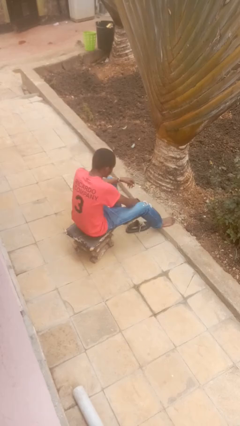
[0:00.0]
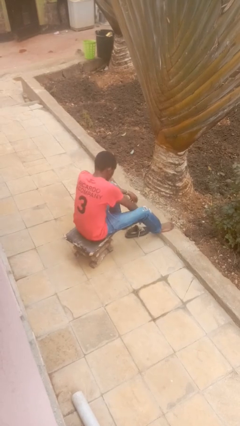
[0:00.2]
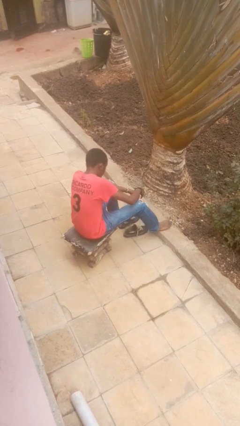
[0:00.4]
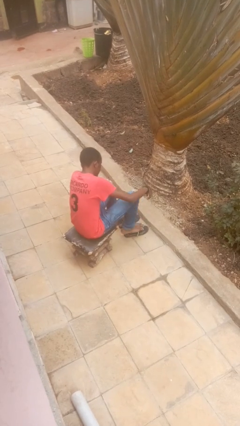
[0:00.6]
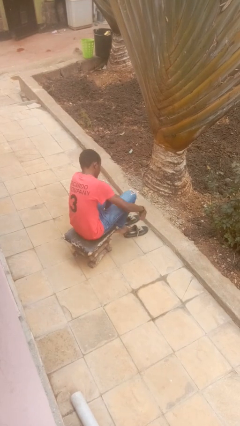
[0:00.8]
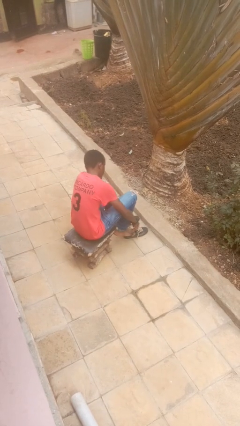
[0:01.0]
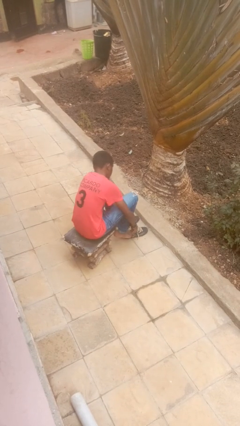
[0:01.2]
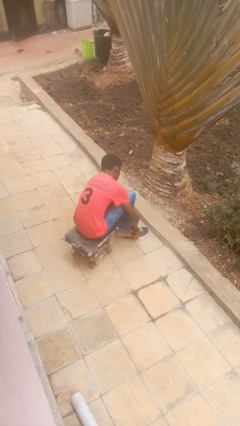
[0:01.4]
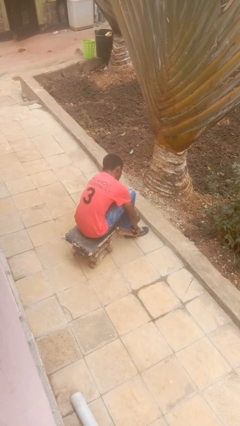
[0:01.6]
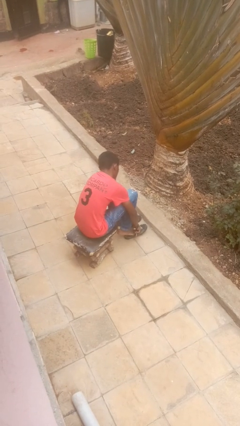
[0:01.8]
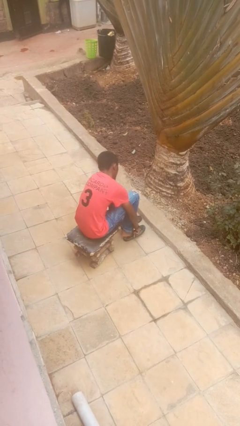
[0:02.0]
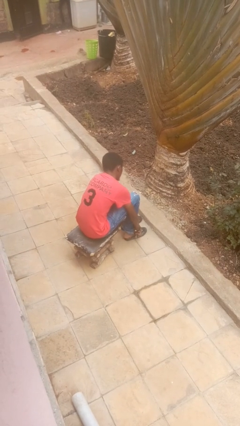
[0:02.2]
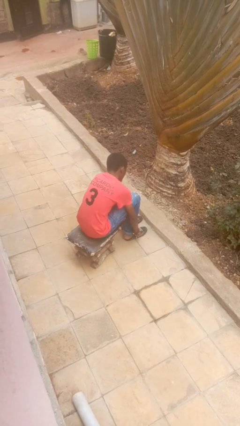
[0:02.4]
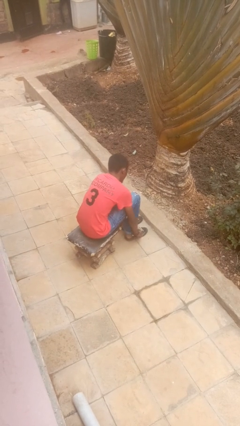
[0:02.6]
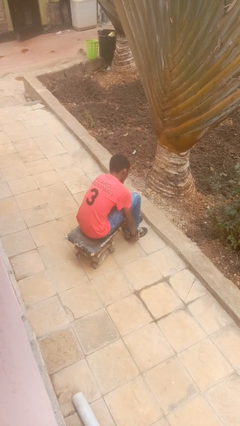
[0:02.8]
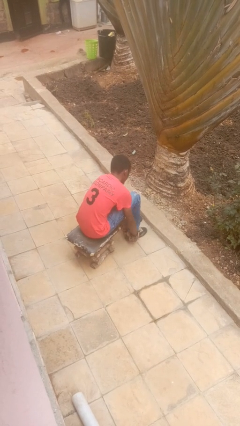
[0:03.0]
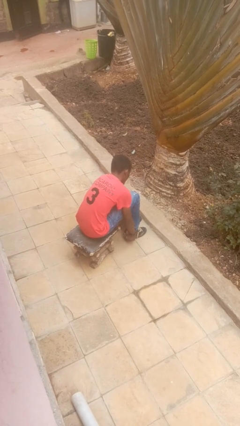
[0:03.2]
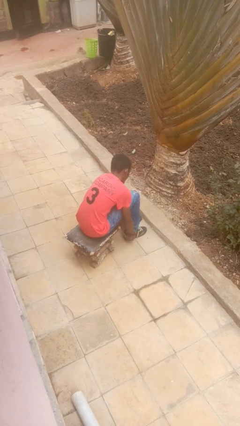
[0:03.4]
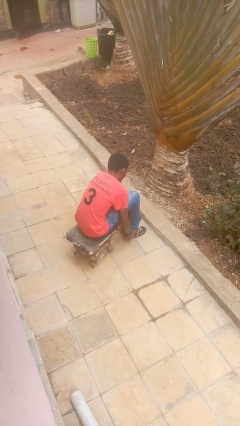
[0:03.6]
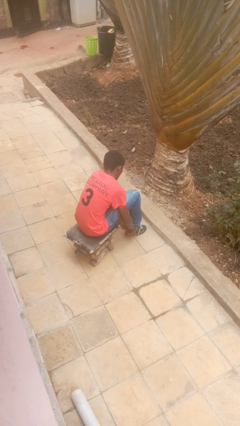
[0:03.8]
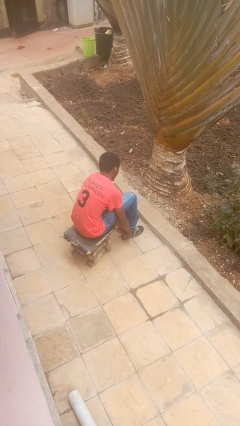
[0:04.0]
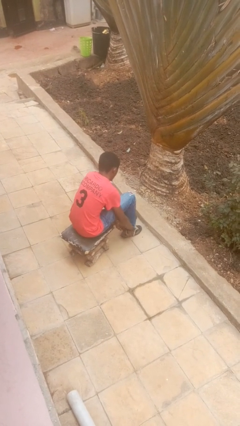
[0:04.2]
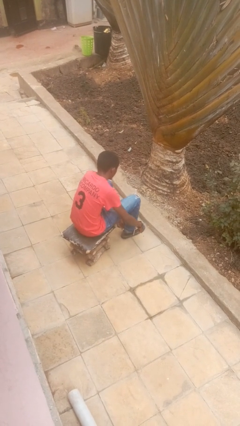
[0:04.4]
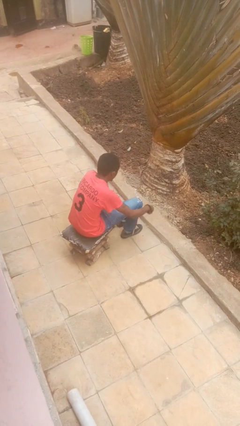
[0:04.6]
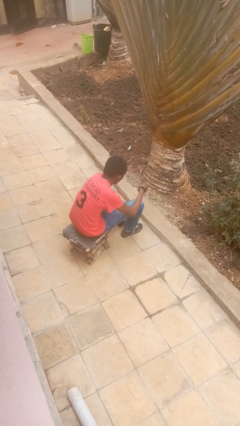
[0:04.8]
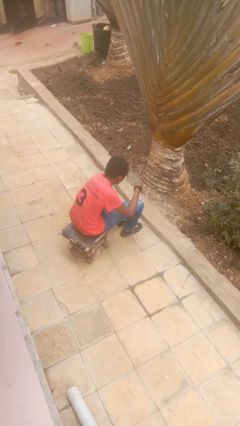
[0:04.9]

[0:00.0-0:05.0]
person puts on shoes

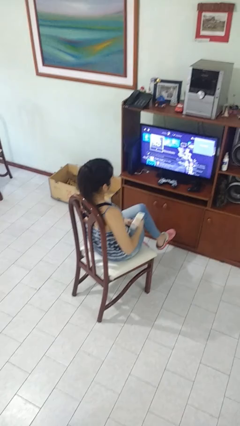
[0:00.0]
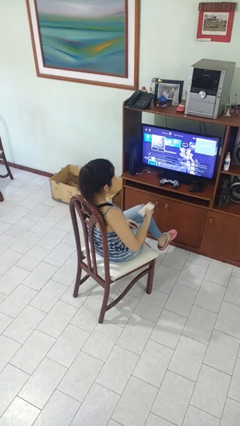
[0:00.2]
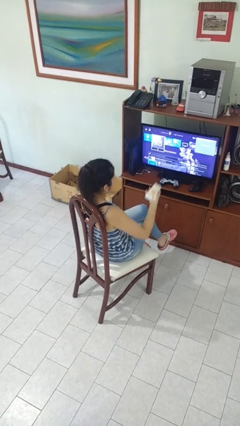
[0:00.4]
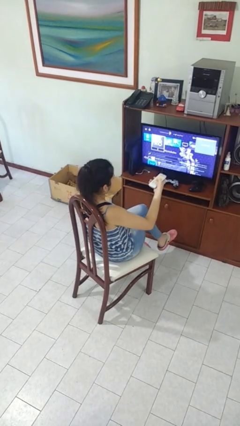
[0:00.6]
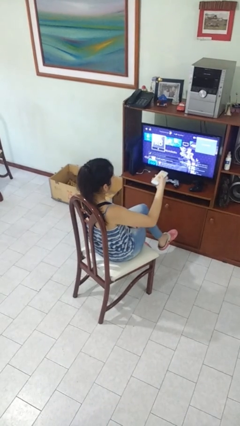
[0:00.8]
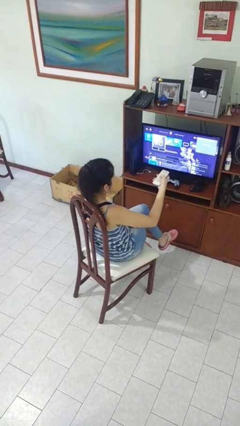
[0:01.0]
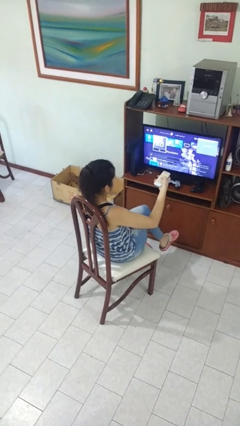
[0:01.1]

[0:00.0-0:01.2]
person uses television remote

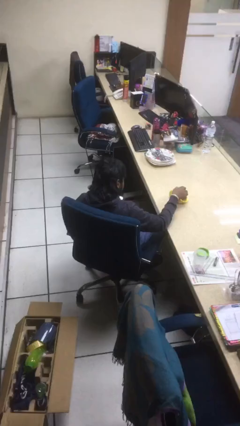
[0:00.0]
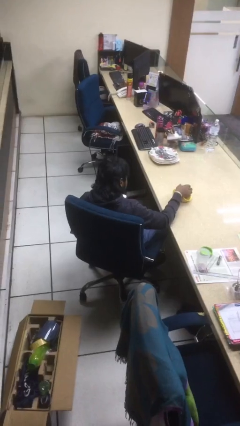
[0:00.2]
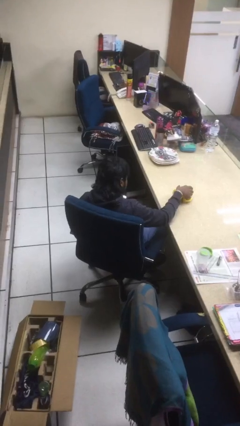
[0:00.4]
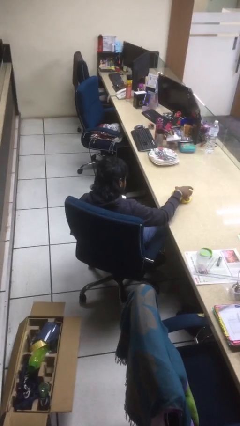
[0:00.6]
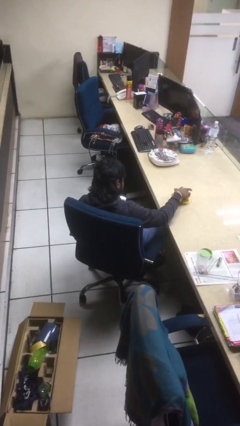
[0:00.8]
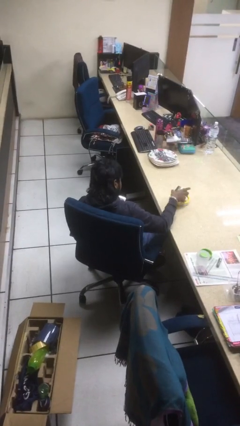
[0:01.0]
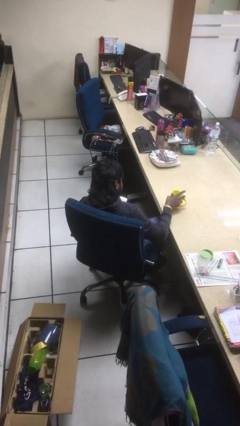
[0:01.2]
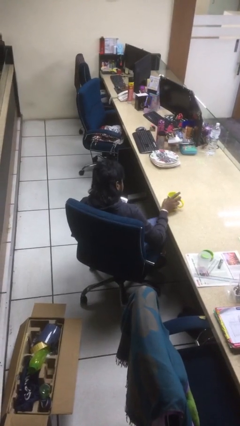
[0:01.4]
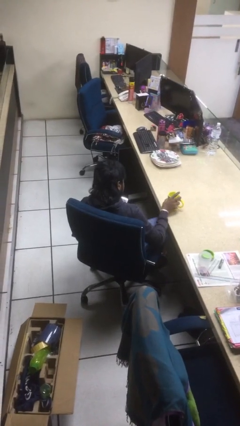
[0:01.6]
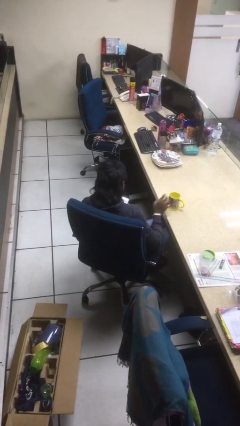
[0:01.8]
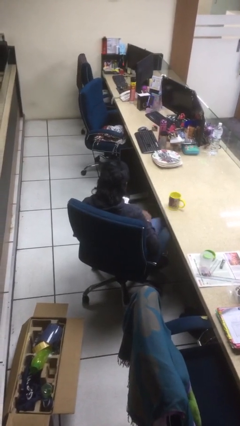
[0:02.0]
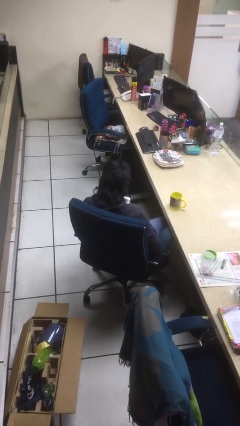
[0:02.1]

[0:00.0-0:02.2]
person sets upright glass

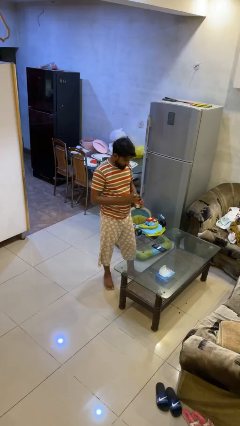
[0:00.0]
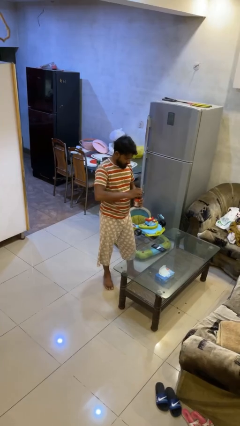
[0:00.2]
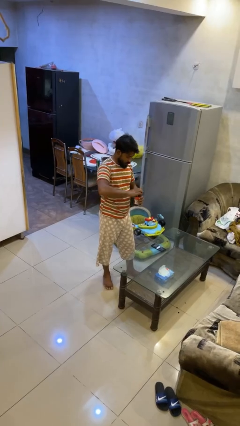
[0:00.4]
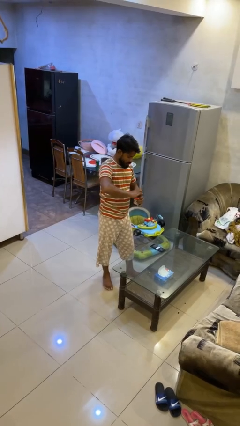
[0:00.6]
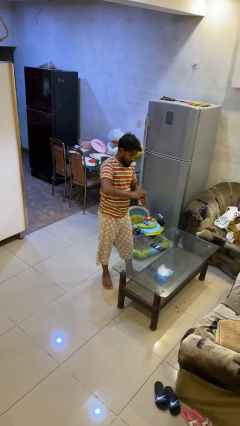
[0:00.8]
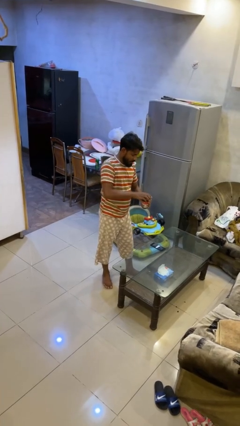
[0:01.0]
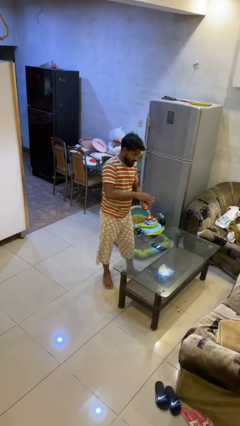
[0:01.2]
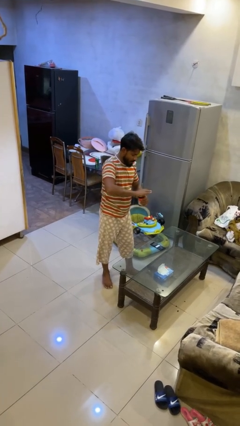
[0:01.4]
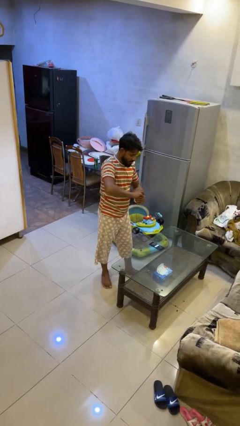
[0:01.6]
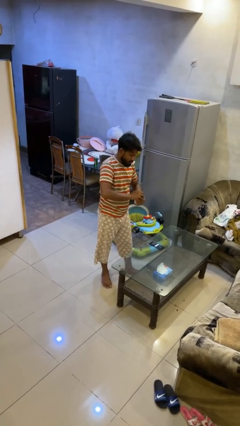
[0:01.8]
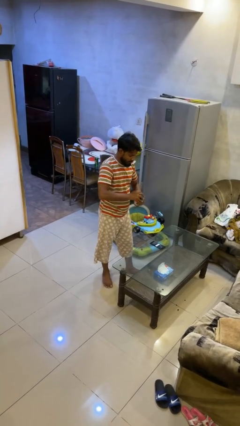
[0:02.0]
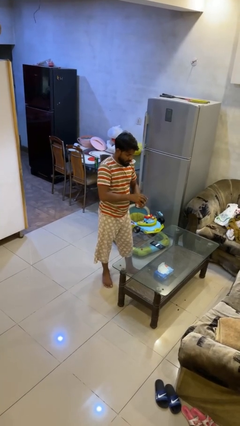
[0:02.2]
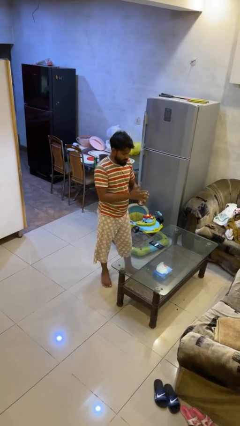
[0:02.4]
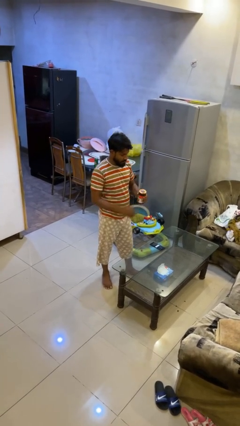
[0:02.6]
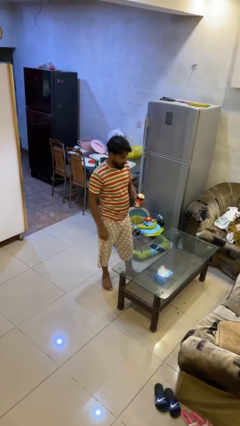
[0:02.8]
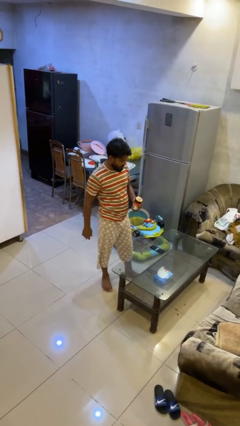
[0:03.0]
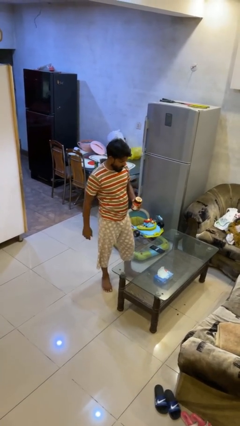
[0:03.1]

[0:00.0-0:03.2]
person closes jar

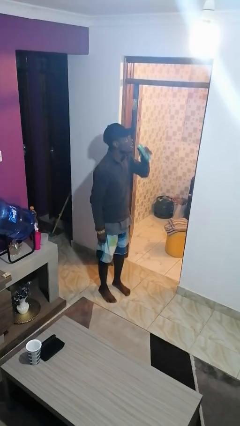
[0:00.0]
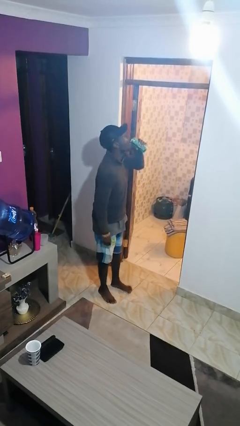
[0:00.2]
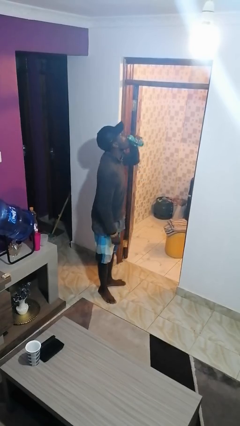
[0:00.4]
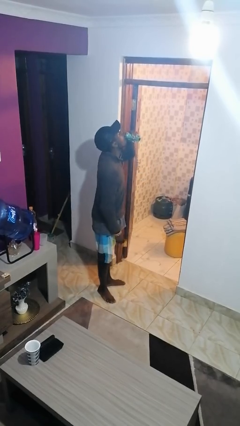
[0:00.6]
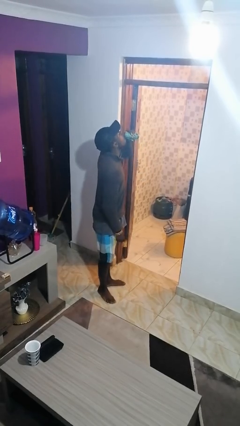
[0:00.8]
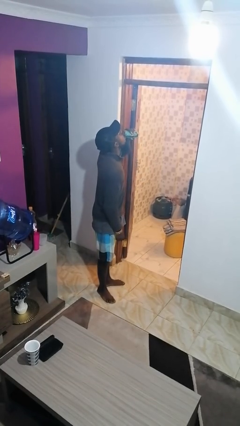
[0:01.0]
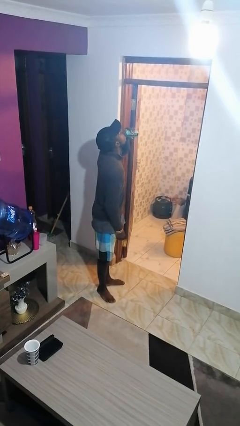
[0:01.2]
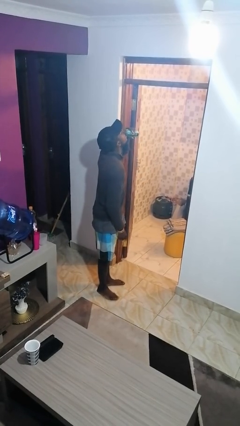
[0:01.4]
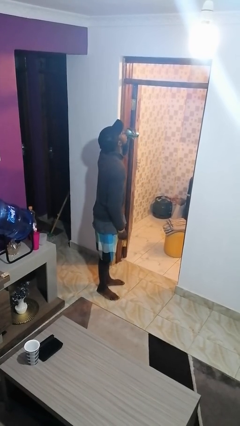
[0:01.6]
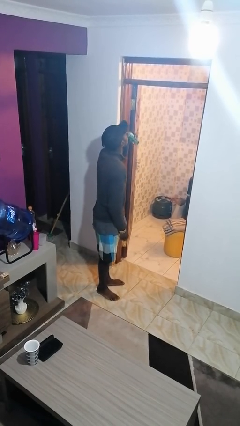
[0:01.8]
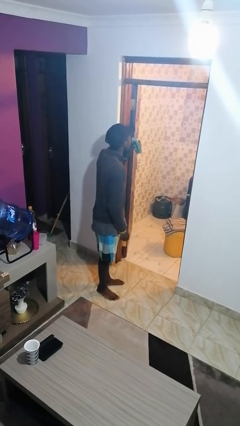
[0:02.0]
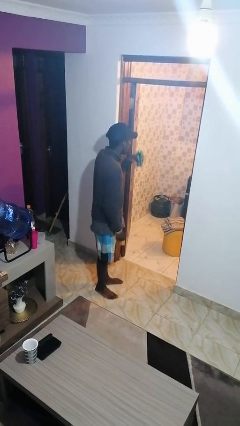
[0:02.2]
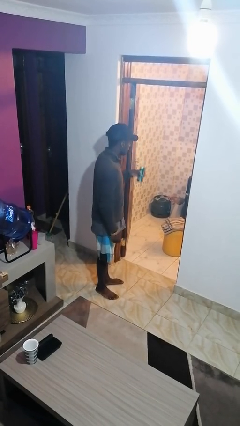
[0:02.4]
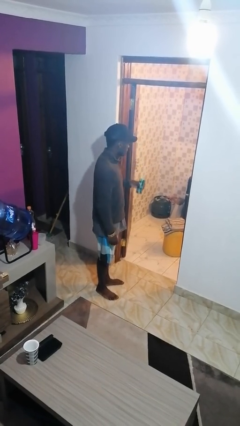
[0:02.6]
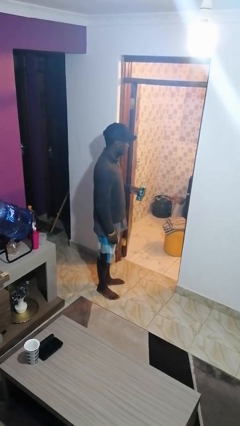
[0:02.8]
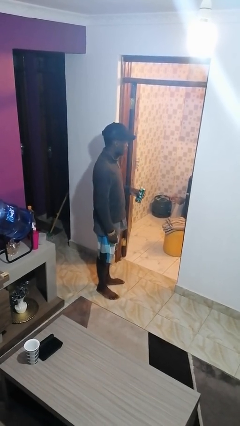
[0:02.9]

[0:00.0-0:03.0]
person drinks from beverage can

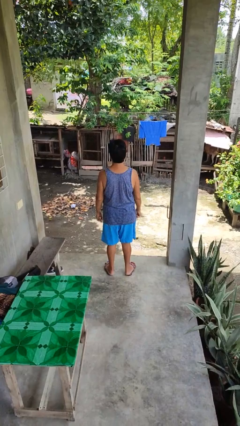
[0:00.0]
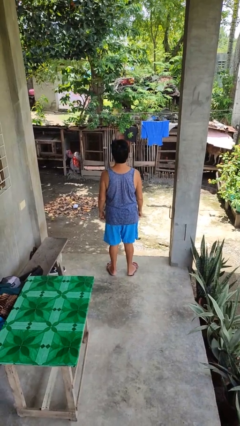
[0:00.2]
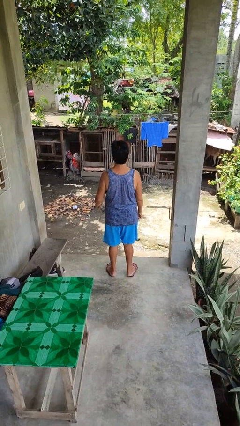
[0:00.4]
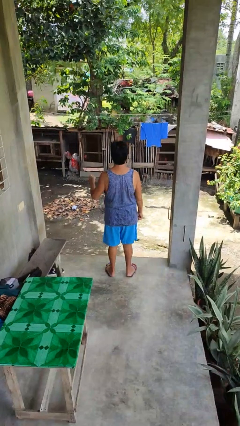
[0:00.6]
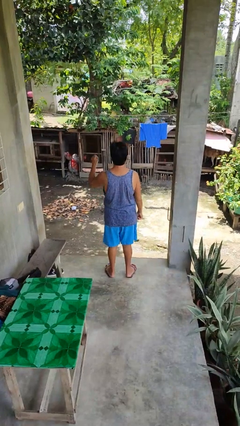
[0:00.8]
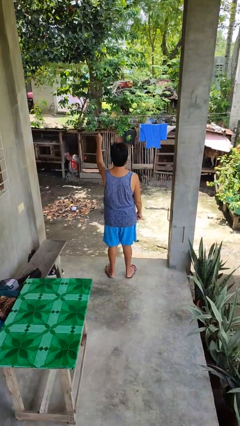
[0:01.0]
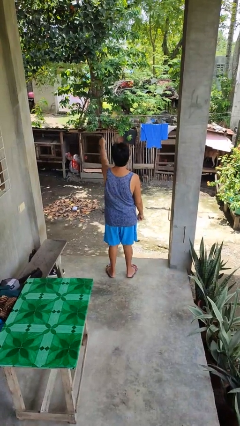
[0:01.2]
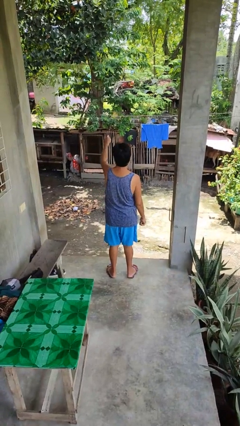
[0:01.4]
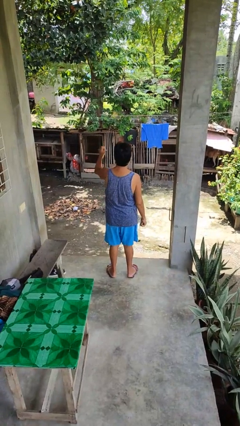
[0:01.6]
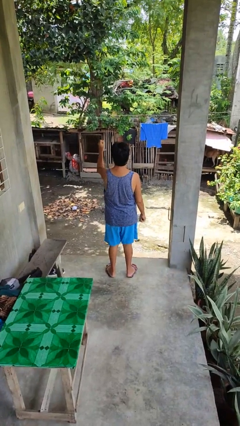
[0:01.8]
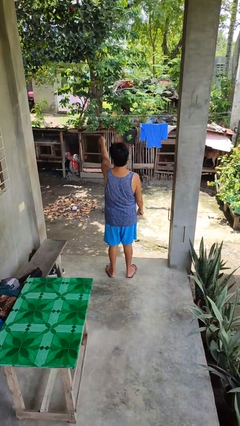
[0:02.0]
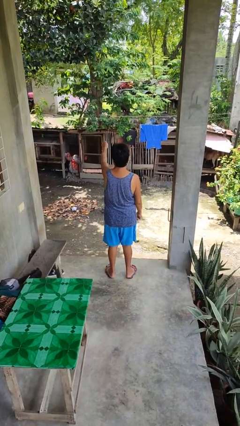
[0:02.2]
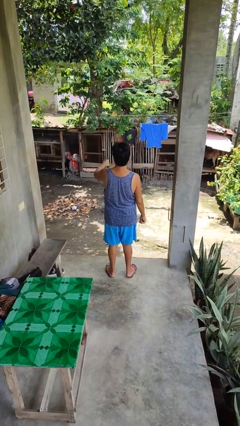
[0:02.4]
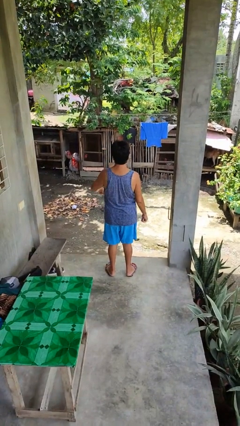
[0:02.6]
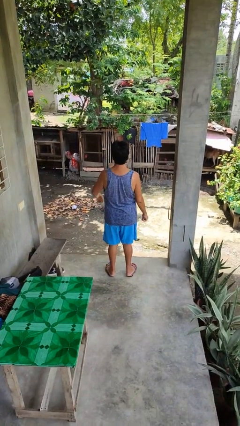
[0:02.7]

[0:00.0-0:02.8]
person punches
